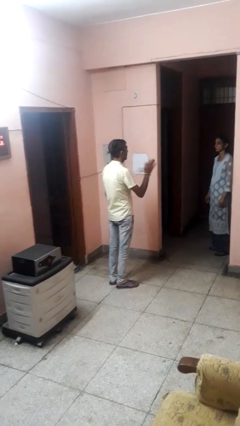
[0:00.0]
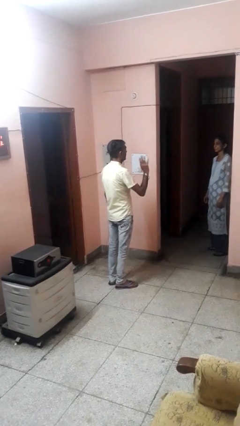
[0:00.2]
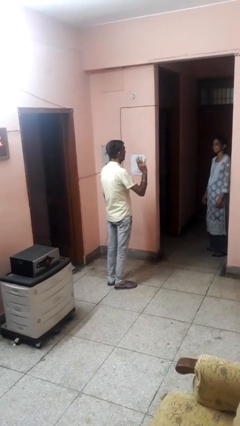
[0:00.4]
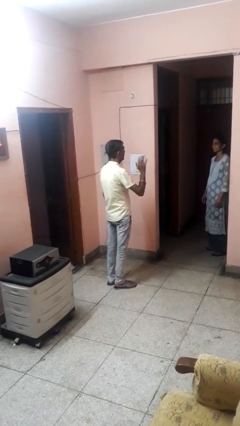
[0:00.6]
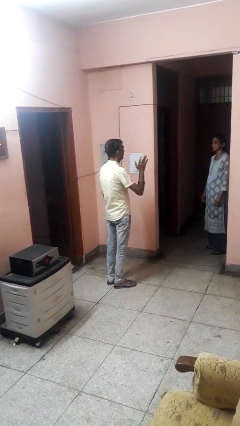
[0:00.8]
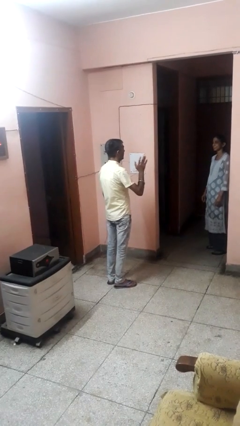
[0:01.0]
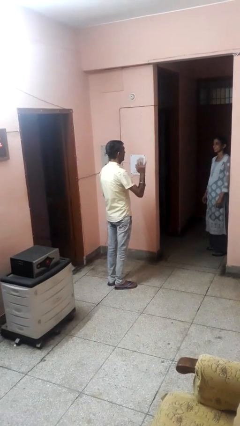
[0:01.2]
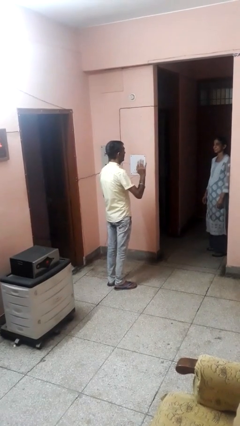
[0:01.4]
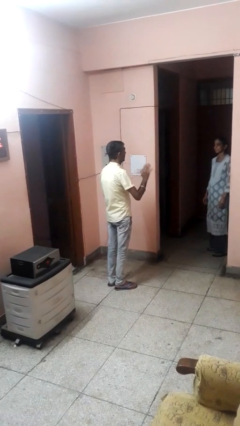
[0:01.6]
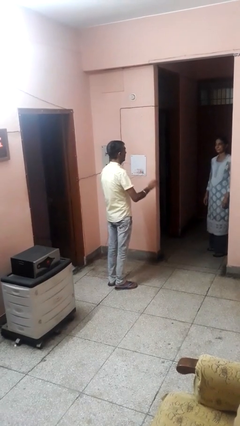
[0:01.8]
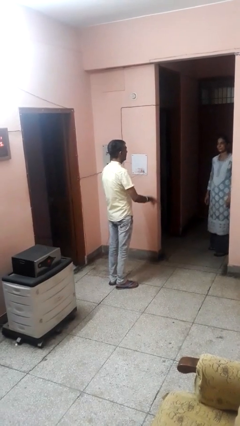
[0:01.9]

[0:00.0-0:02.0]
person waves at person

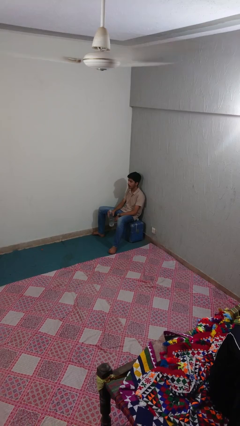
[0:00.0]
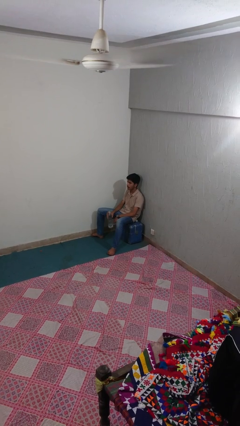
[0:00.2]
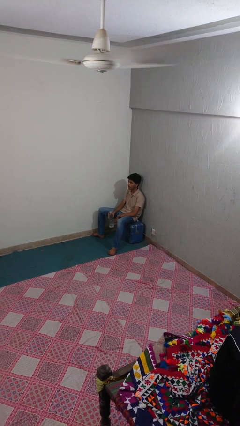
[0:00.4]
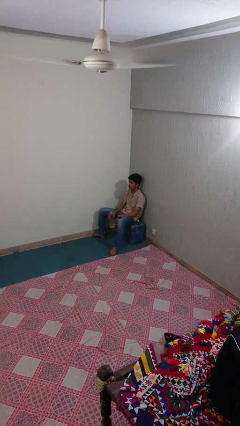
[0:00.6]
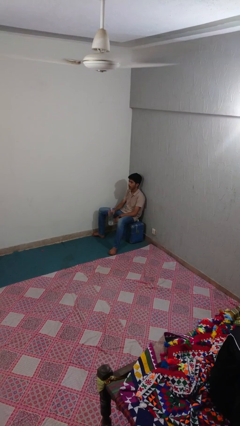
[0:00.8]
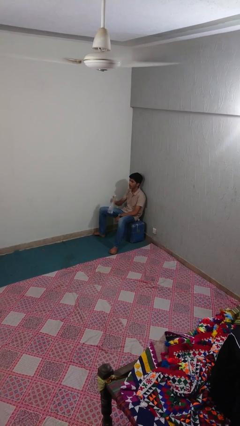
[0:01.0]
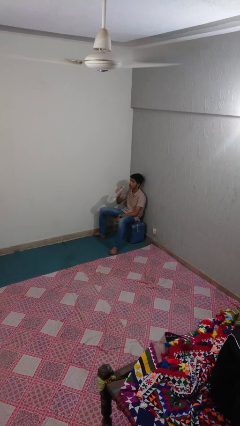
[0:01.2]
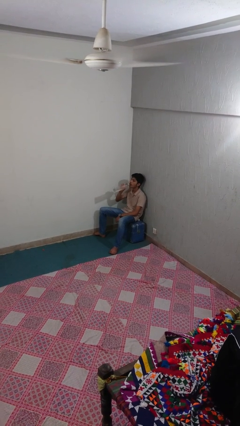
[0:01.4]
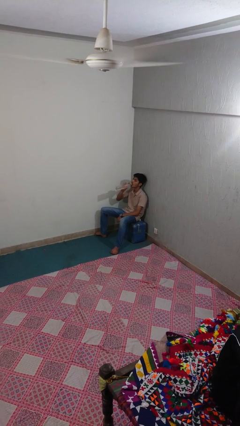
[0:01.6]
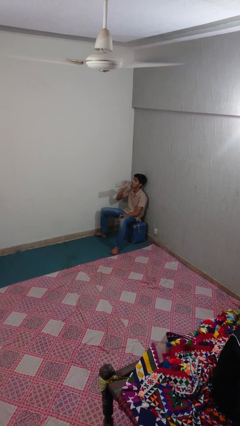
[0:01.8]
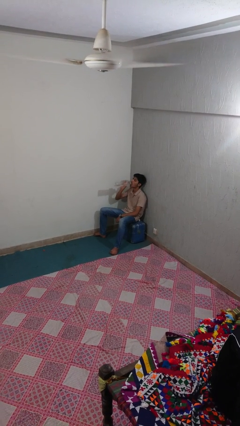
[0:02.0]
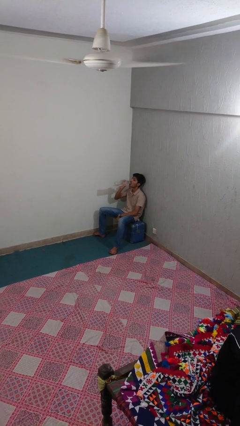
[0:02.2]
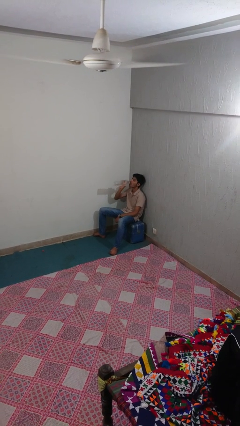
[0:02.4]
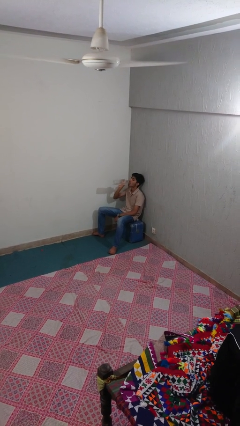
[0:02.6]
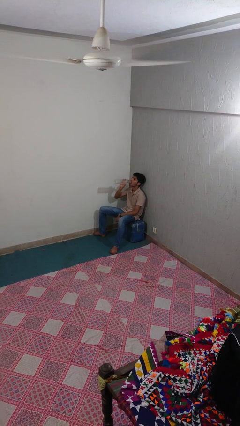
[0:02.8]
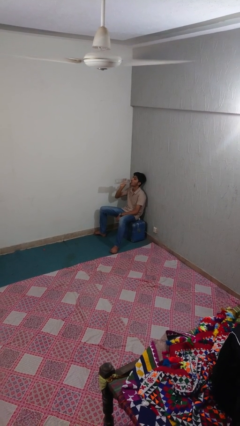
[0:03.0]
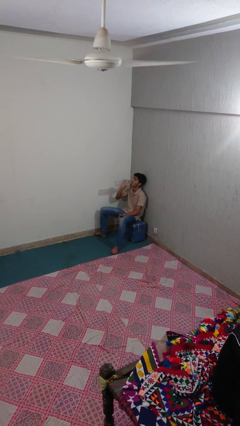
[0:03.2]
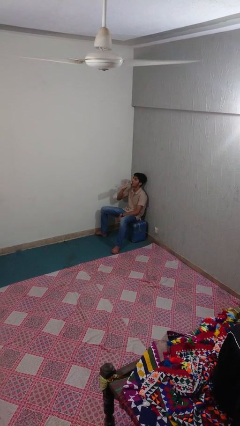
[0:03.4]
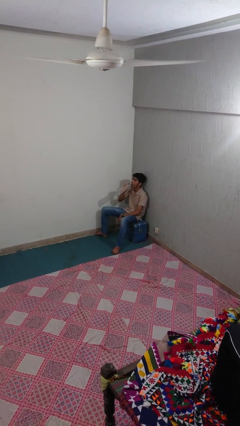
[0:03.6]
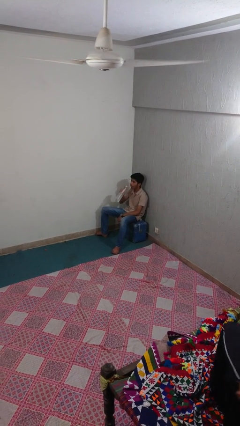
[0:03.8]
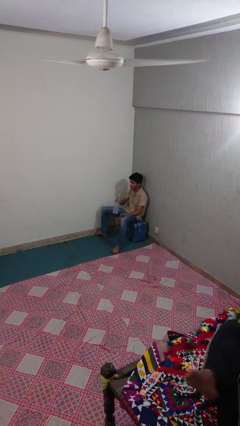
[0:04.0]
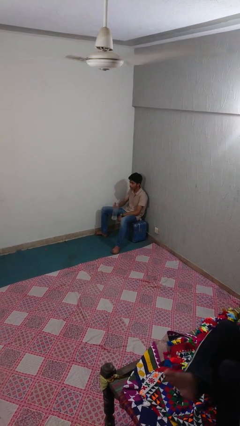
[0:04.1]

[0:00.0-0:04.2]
person drinks from bottle

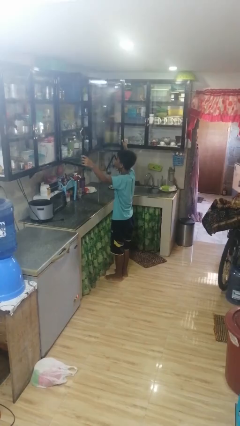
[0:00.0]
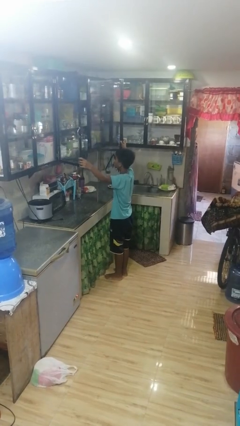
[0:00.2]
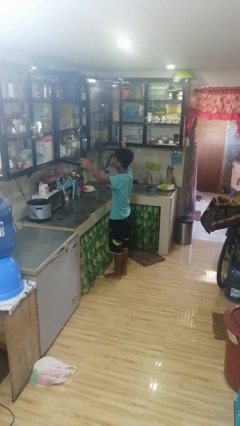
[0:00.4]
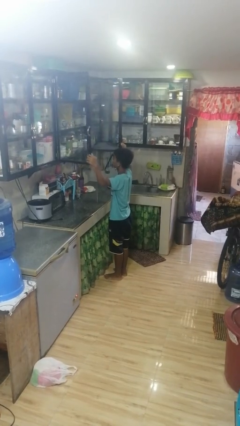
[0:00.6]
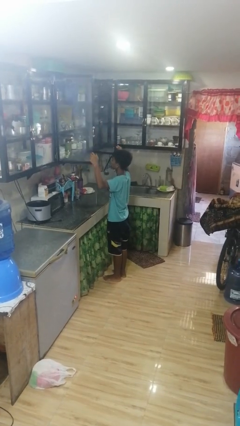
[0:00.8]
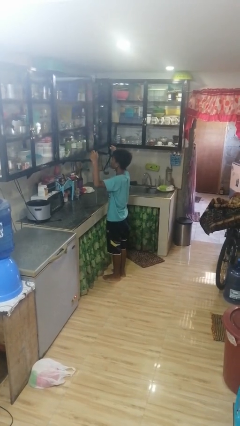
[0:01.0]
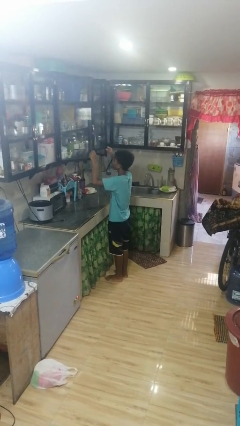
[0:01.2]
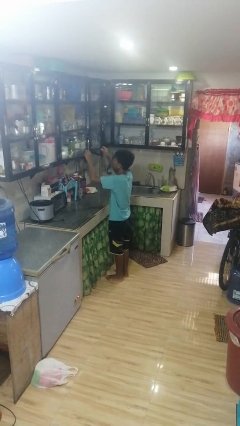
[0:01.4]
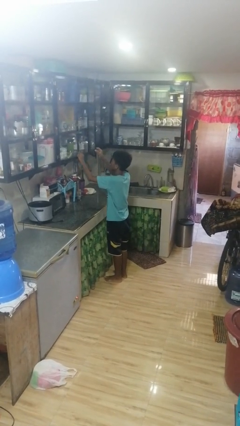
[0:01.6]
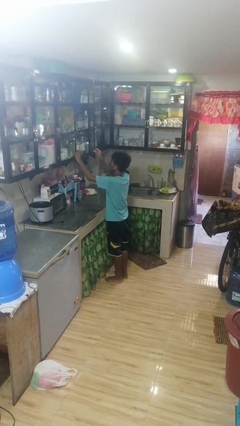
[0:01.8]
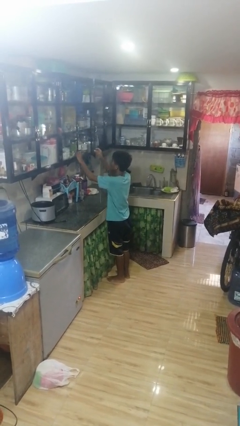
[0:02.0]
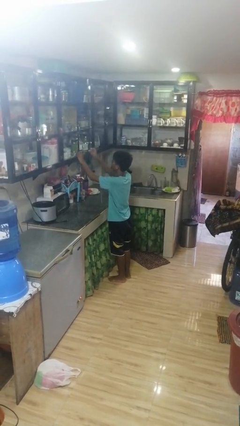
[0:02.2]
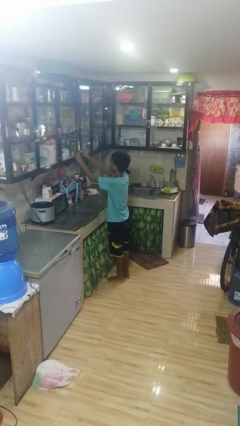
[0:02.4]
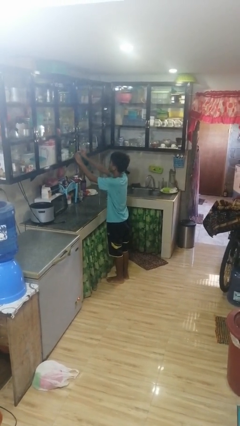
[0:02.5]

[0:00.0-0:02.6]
person closes cabinet

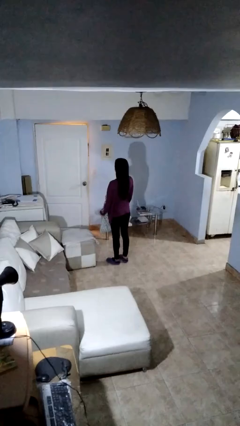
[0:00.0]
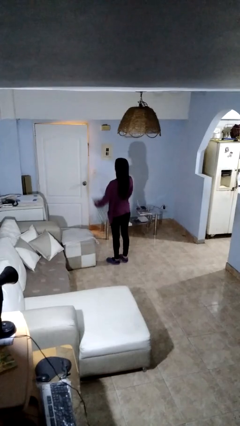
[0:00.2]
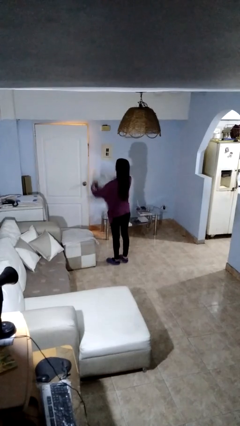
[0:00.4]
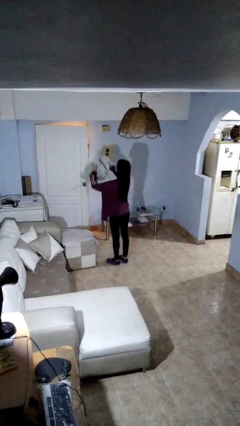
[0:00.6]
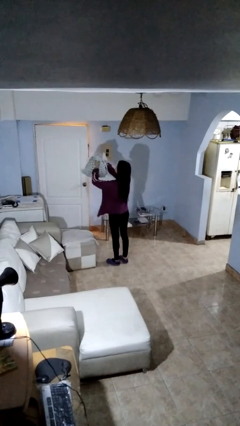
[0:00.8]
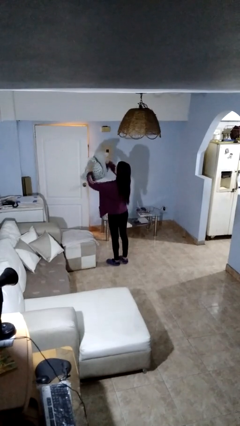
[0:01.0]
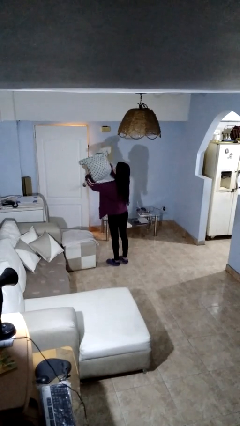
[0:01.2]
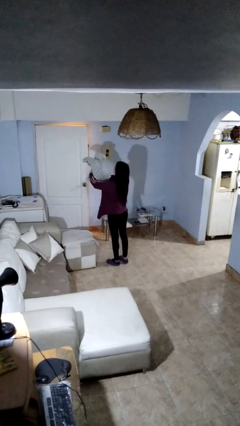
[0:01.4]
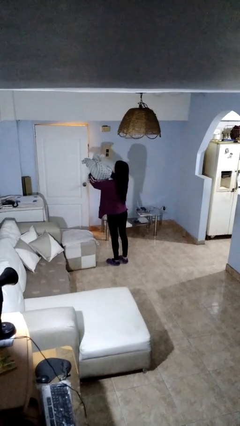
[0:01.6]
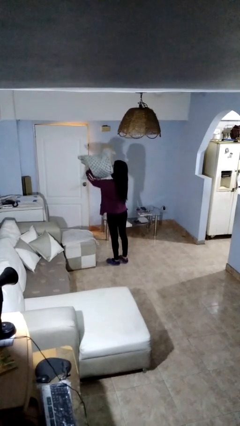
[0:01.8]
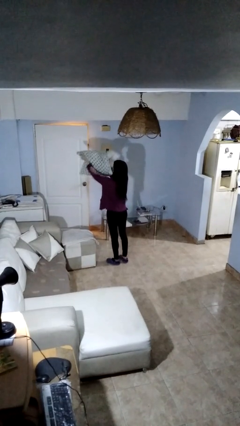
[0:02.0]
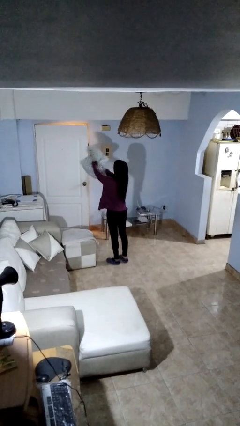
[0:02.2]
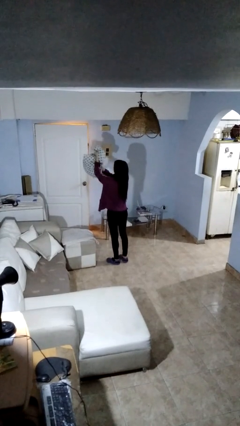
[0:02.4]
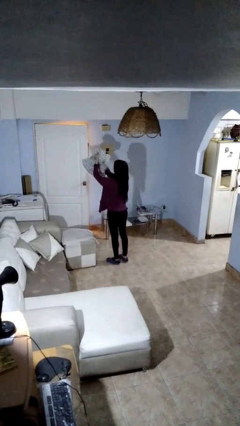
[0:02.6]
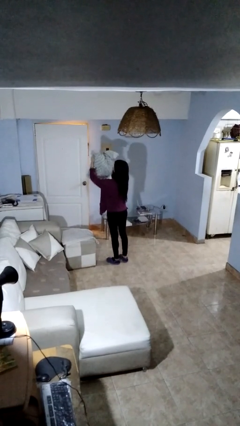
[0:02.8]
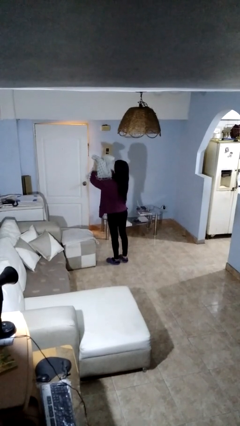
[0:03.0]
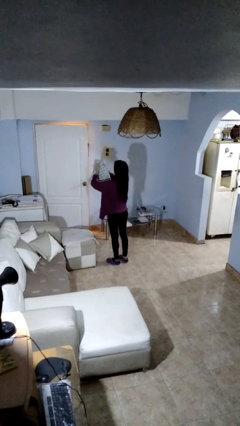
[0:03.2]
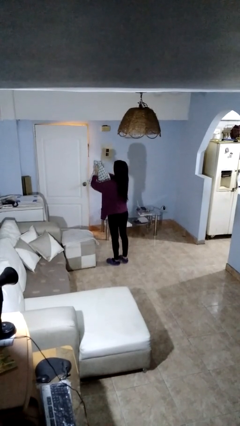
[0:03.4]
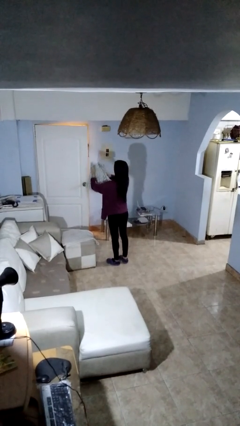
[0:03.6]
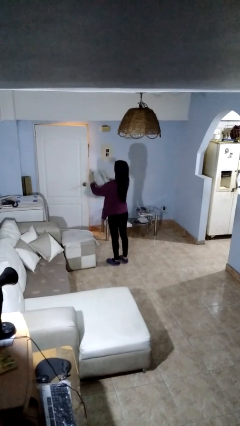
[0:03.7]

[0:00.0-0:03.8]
person squeezes object

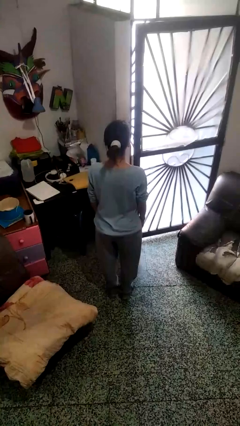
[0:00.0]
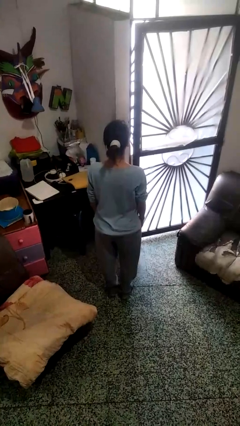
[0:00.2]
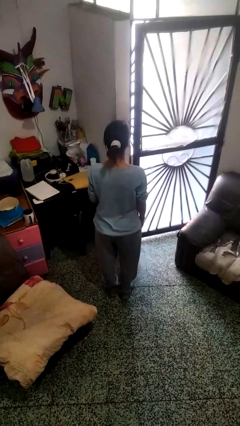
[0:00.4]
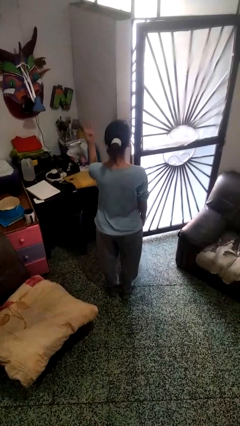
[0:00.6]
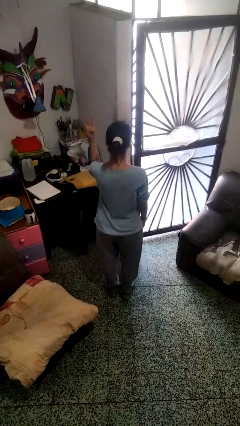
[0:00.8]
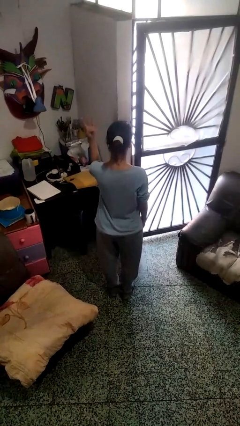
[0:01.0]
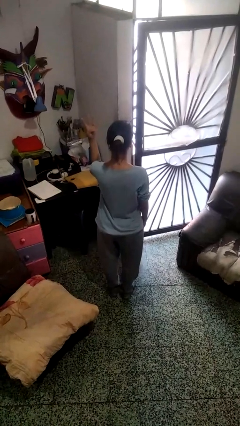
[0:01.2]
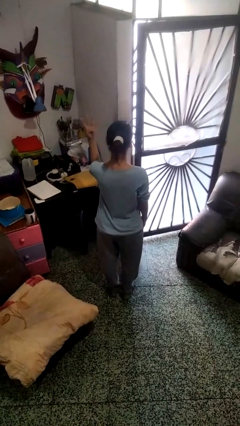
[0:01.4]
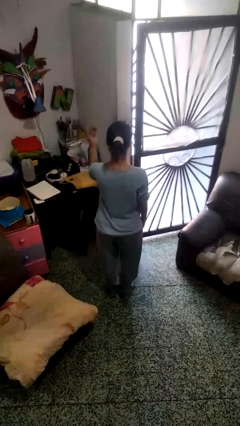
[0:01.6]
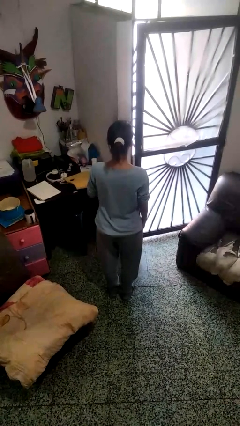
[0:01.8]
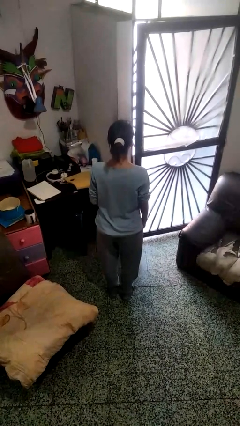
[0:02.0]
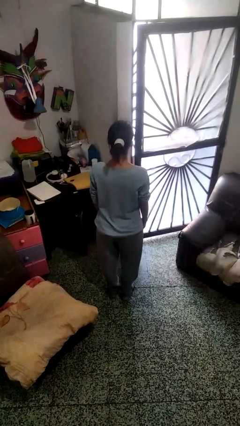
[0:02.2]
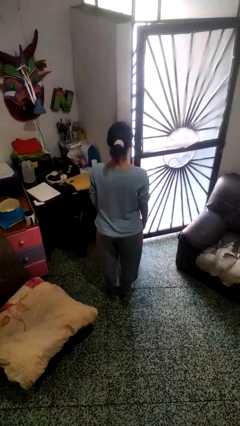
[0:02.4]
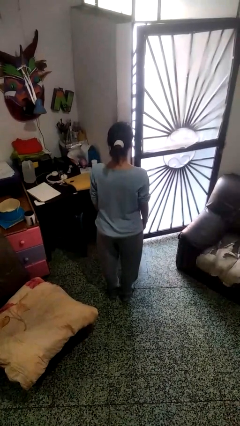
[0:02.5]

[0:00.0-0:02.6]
person gestures number four

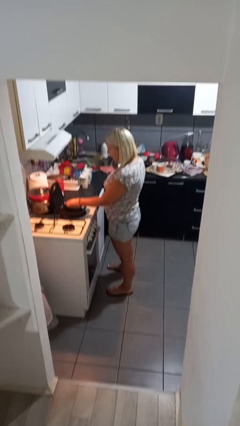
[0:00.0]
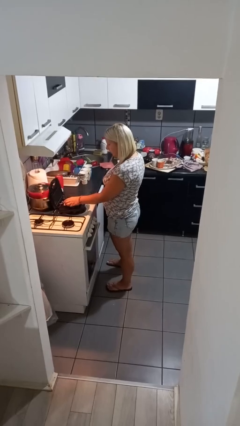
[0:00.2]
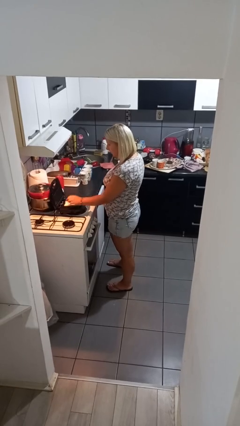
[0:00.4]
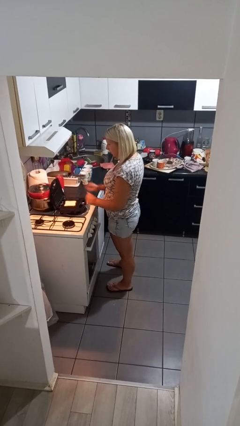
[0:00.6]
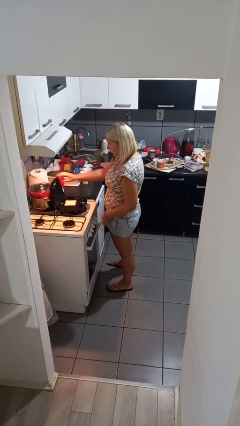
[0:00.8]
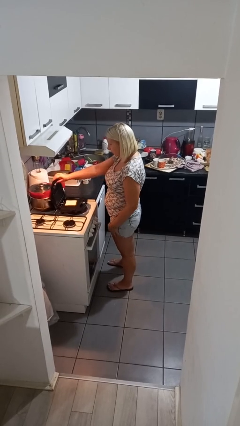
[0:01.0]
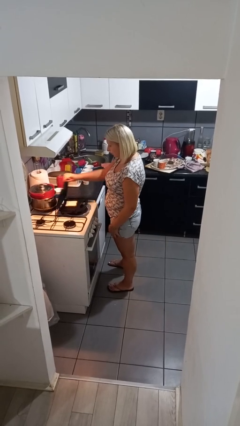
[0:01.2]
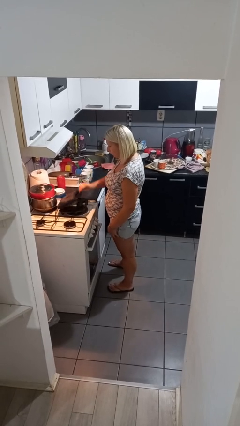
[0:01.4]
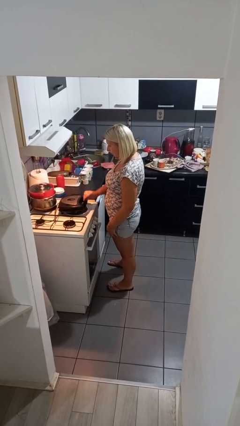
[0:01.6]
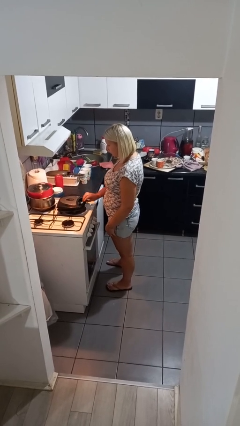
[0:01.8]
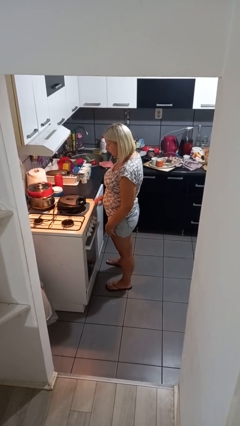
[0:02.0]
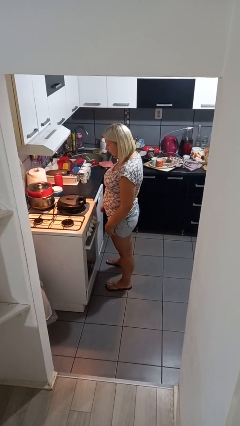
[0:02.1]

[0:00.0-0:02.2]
person puts object into toaster

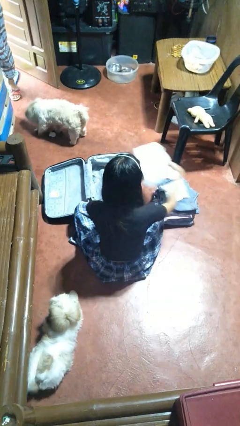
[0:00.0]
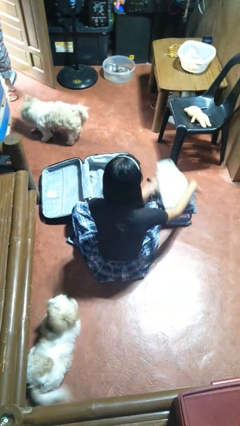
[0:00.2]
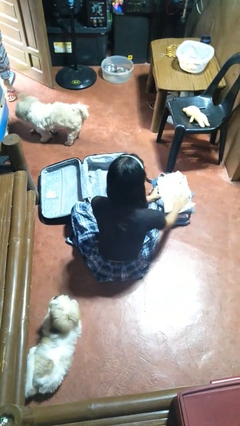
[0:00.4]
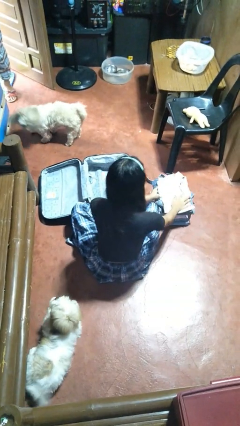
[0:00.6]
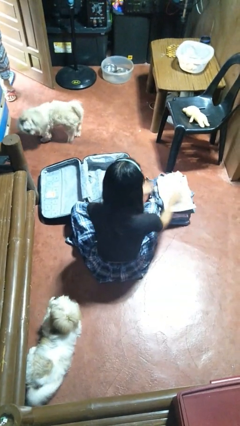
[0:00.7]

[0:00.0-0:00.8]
person unloads clothes from suitcase
